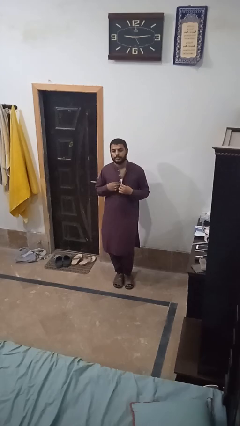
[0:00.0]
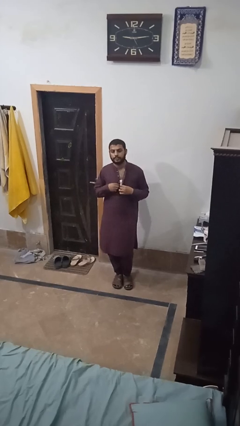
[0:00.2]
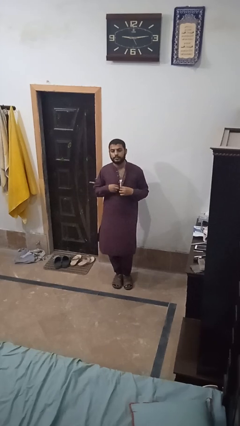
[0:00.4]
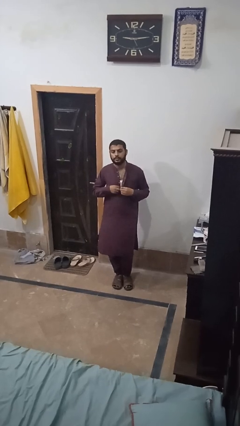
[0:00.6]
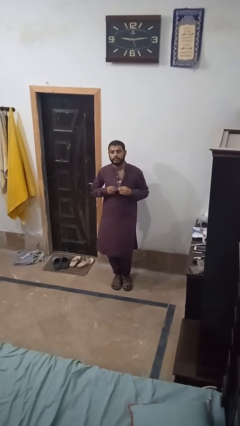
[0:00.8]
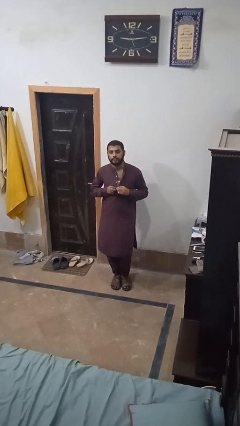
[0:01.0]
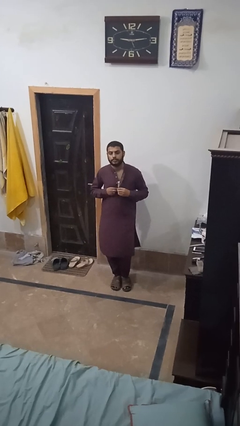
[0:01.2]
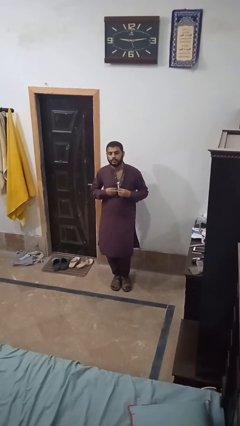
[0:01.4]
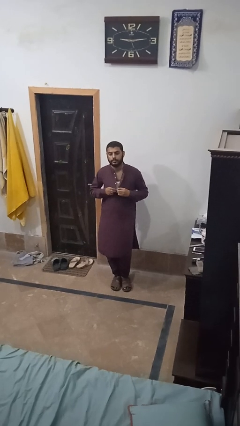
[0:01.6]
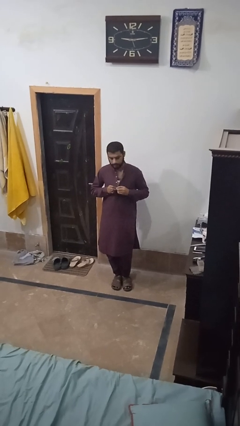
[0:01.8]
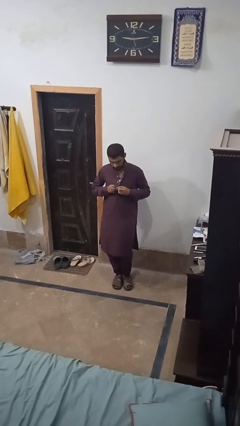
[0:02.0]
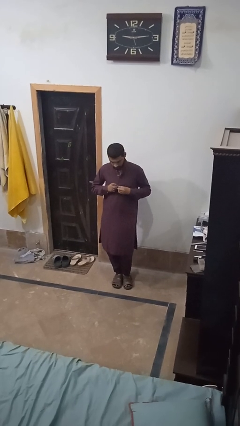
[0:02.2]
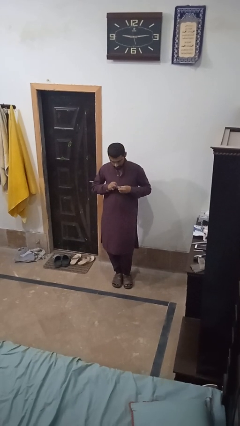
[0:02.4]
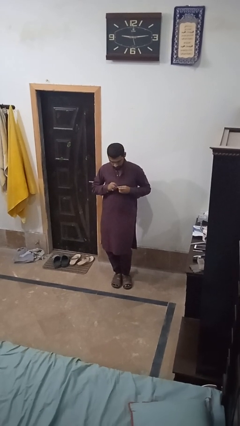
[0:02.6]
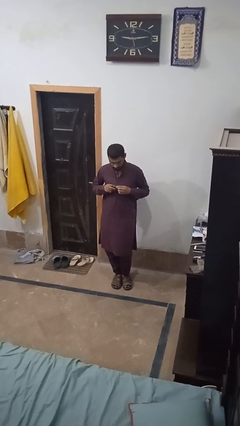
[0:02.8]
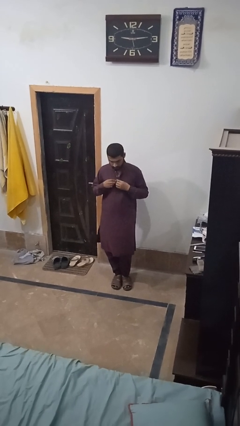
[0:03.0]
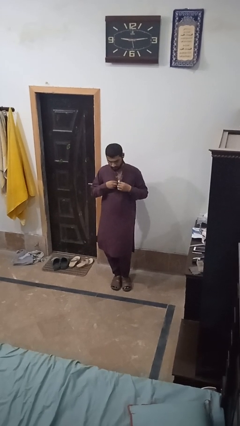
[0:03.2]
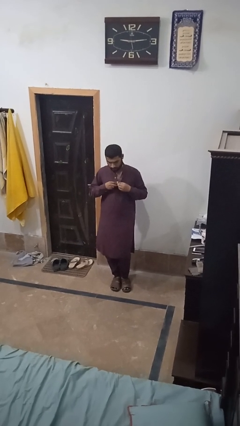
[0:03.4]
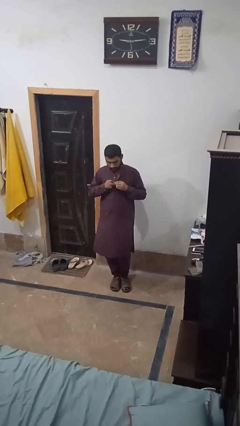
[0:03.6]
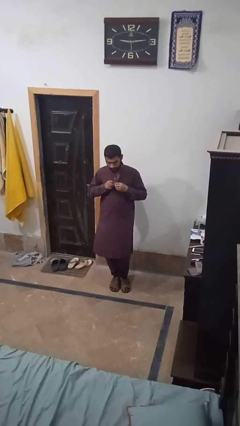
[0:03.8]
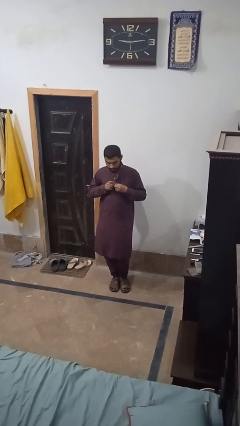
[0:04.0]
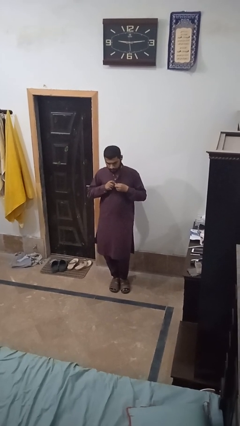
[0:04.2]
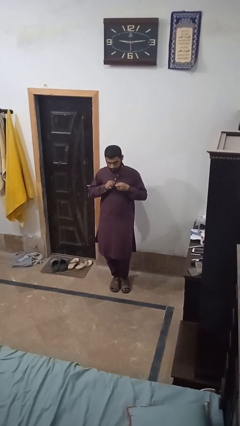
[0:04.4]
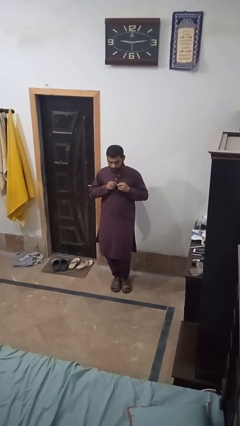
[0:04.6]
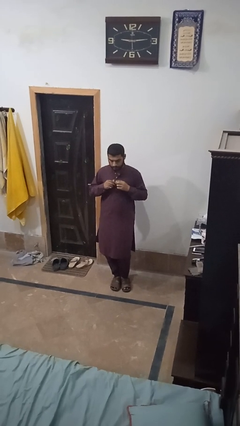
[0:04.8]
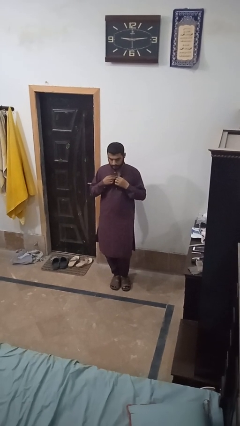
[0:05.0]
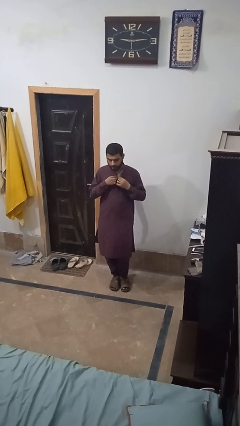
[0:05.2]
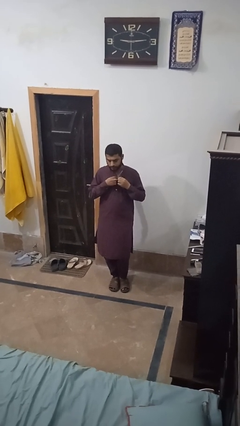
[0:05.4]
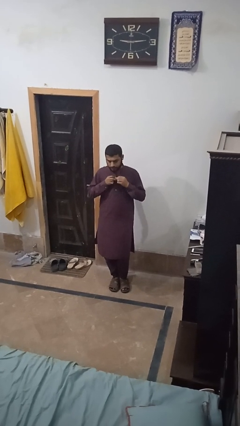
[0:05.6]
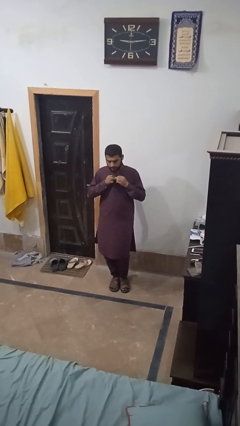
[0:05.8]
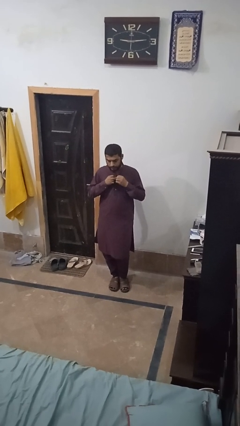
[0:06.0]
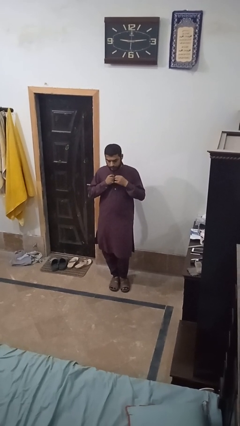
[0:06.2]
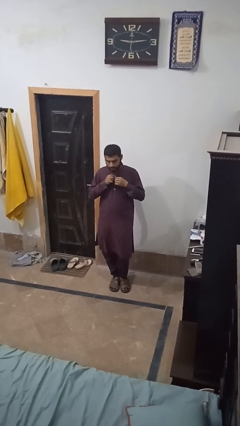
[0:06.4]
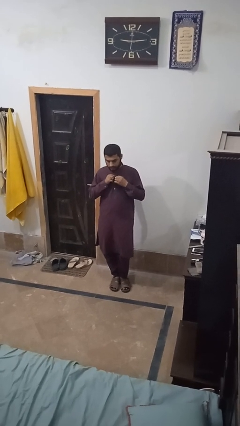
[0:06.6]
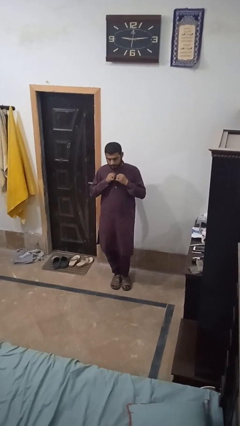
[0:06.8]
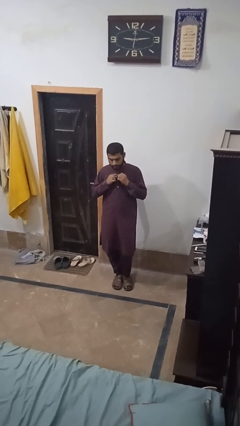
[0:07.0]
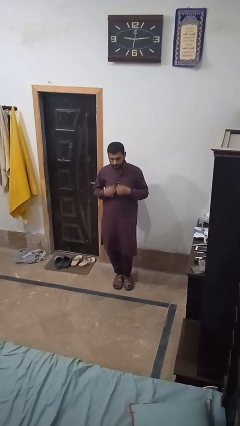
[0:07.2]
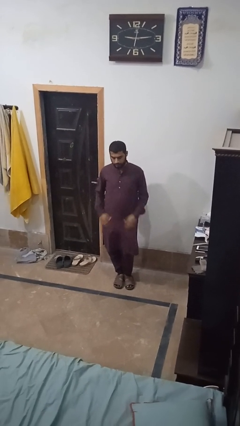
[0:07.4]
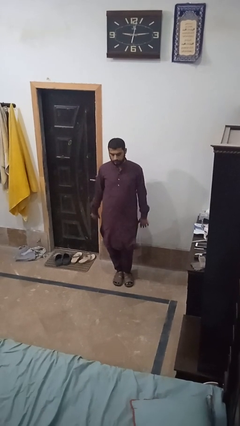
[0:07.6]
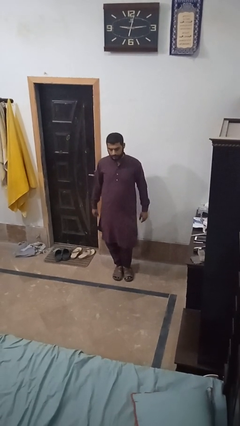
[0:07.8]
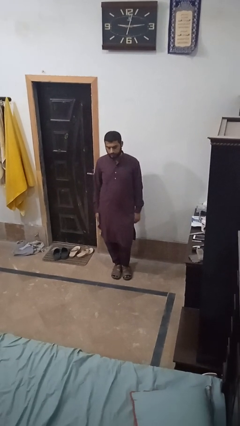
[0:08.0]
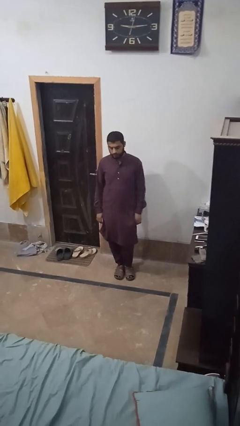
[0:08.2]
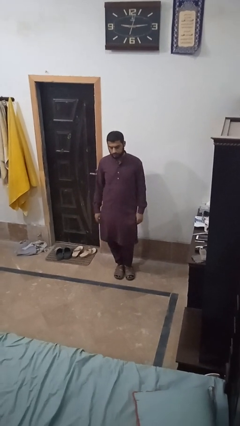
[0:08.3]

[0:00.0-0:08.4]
person buttons shirt

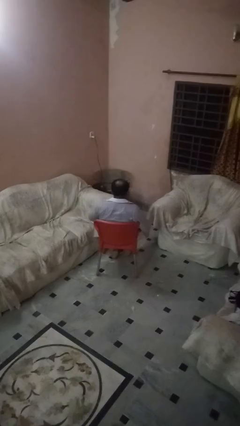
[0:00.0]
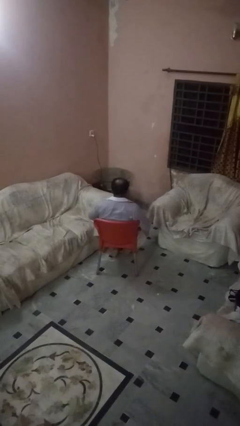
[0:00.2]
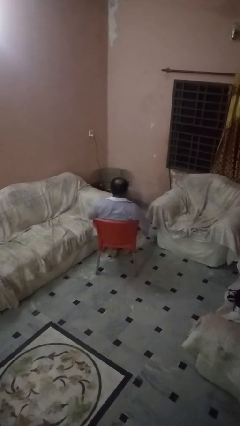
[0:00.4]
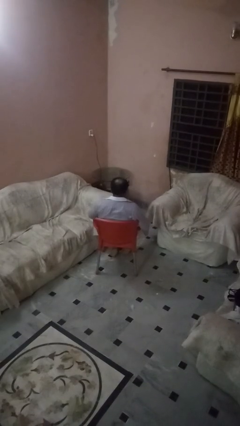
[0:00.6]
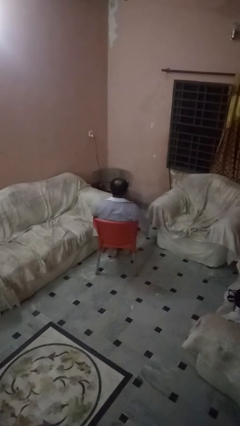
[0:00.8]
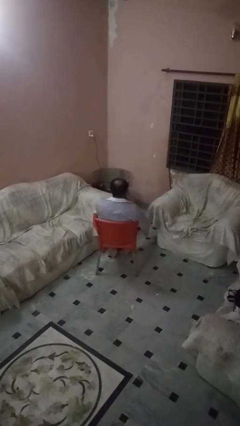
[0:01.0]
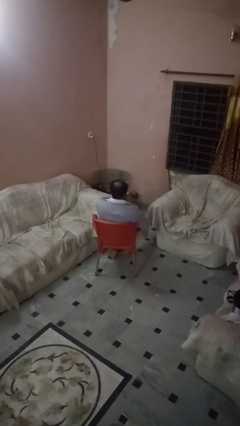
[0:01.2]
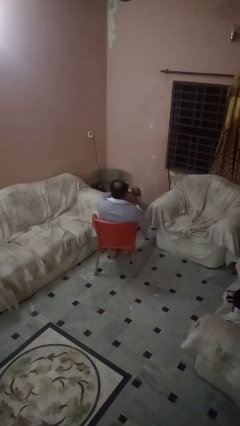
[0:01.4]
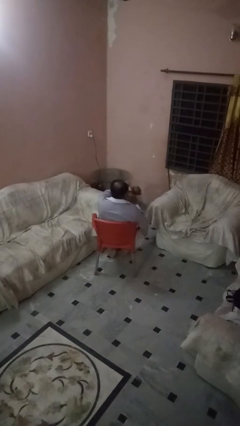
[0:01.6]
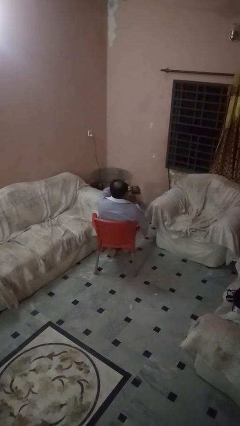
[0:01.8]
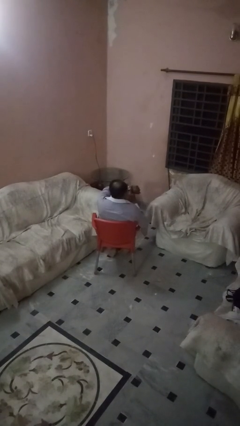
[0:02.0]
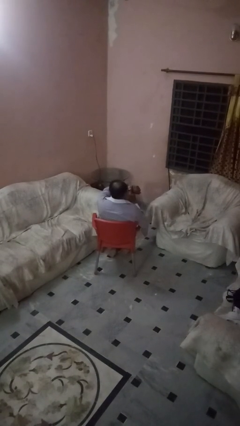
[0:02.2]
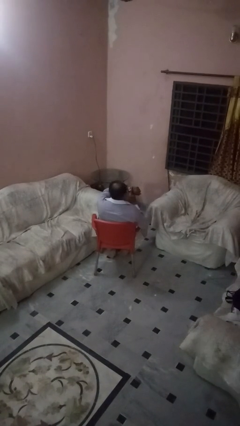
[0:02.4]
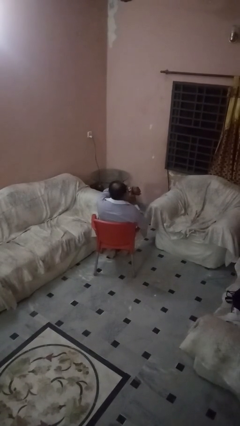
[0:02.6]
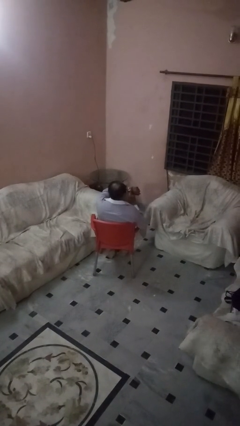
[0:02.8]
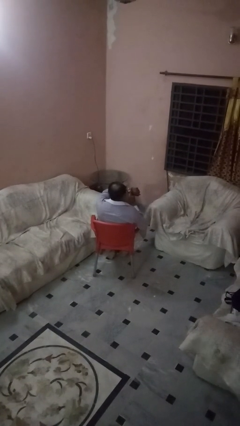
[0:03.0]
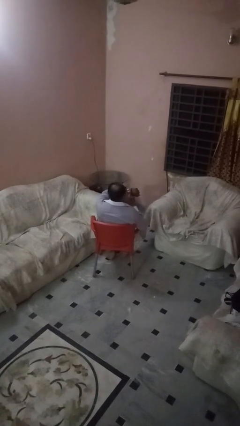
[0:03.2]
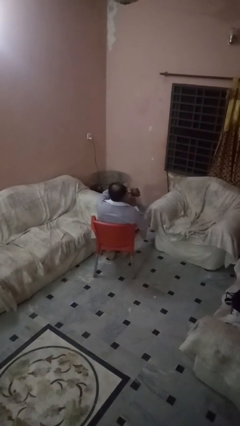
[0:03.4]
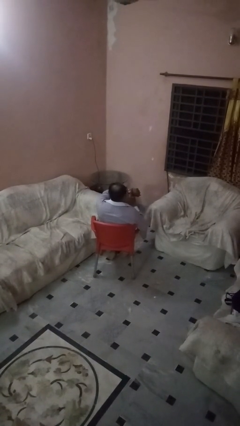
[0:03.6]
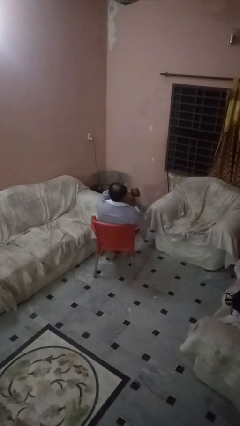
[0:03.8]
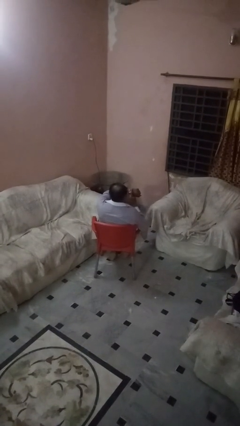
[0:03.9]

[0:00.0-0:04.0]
person gestures watch closely

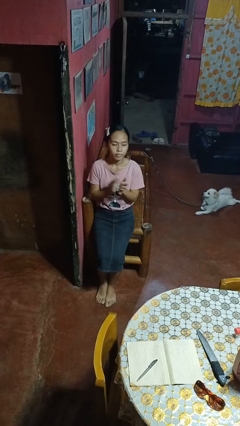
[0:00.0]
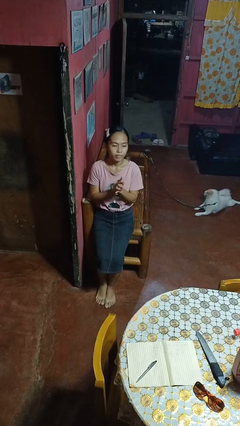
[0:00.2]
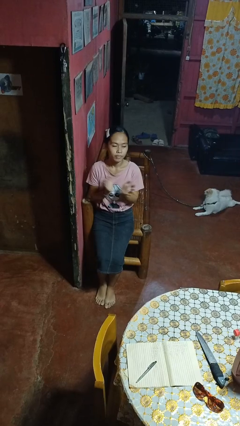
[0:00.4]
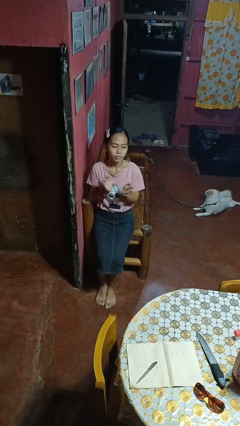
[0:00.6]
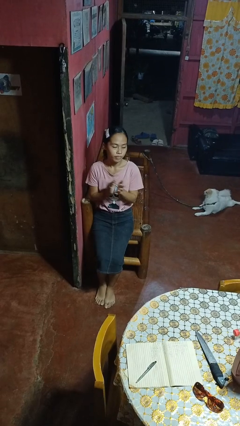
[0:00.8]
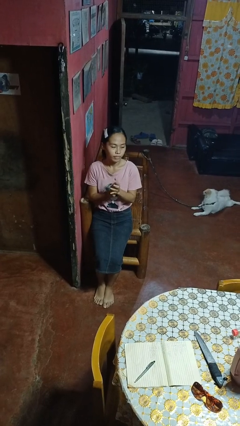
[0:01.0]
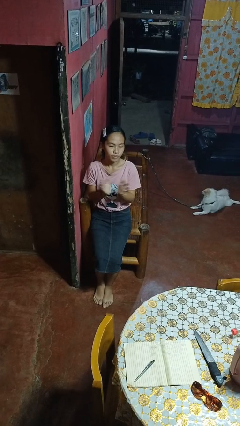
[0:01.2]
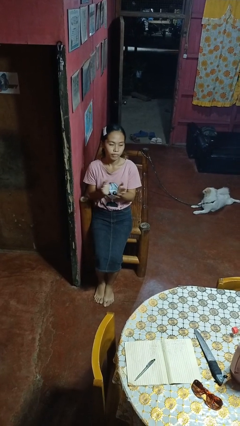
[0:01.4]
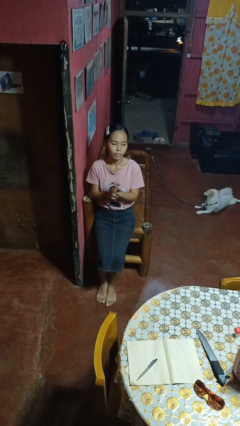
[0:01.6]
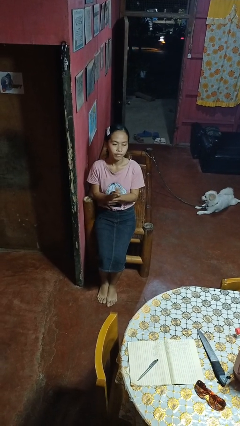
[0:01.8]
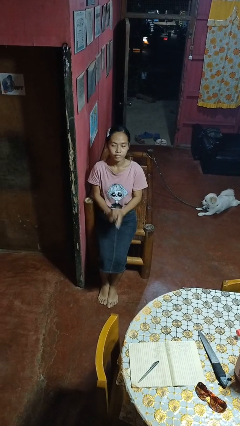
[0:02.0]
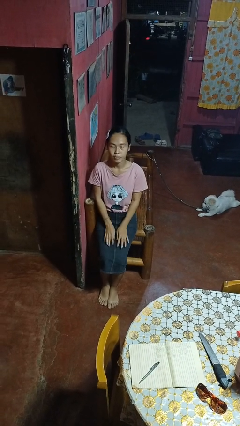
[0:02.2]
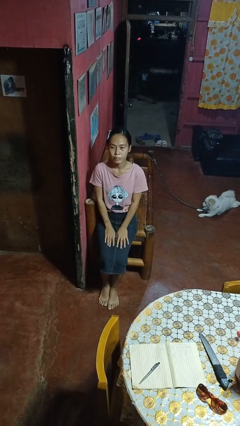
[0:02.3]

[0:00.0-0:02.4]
person claps hands

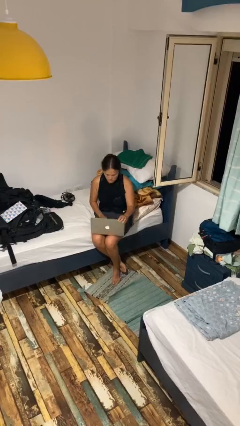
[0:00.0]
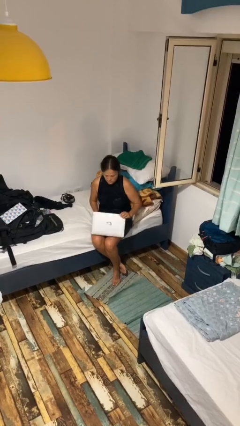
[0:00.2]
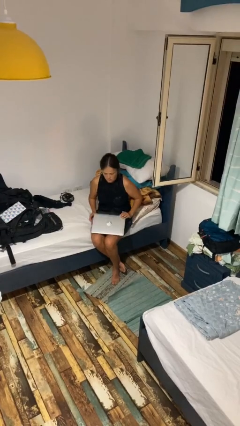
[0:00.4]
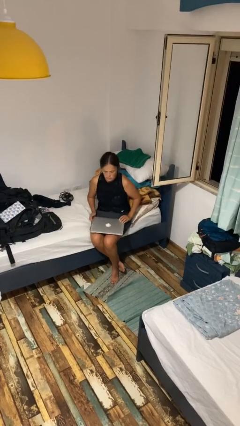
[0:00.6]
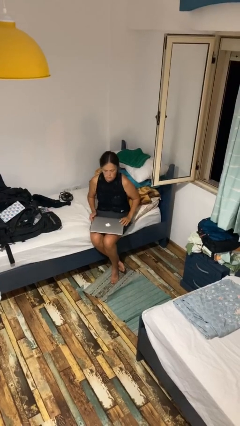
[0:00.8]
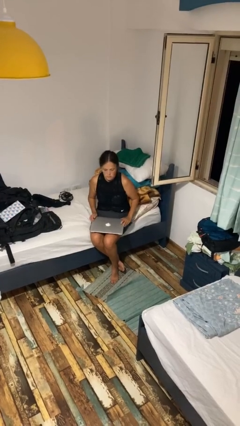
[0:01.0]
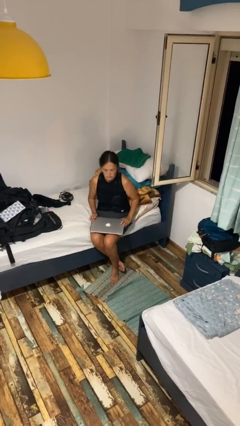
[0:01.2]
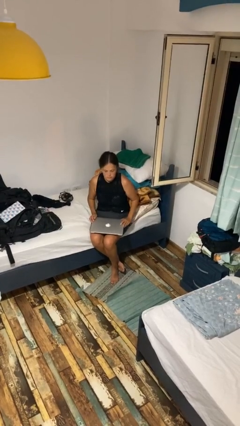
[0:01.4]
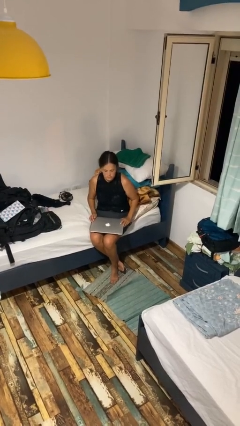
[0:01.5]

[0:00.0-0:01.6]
person closes laptop

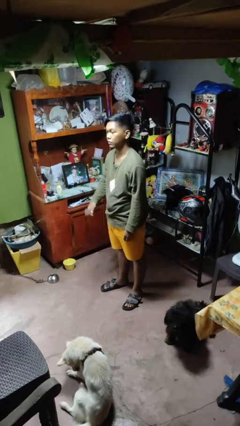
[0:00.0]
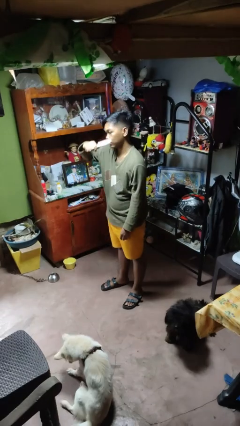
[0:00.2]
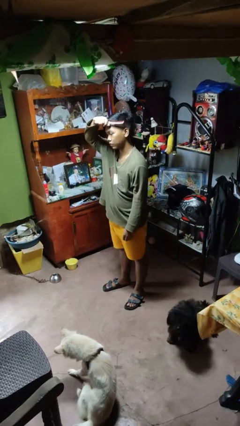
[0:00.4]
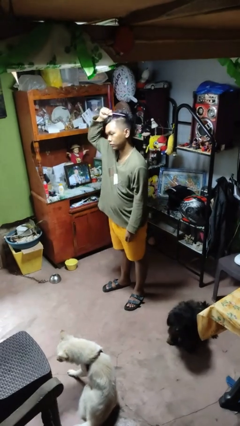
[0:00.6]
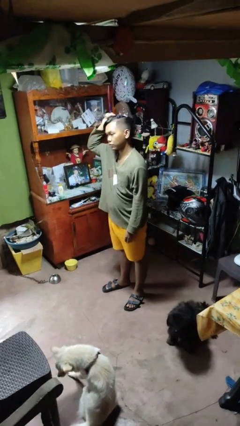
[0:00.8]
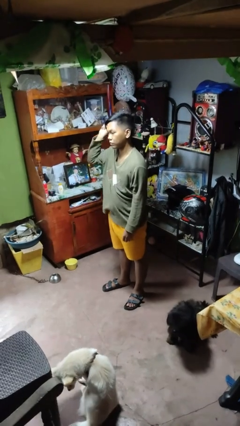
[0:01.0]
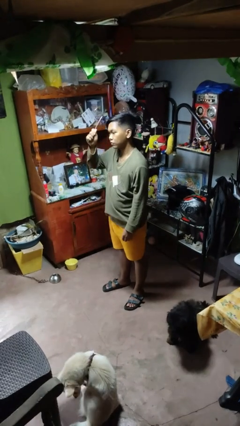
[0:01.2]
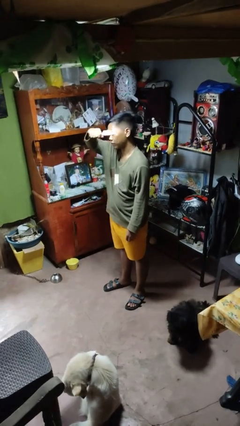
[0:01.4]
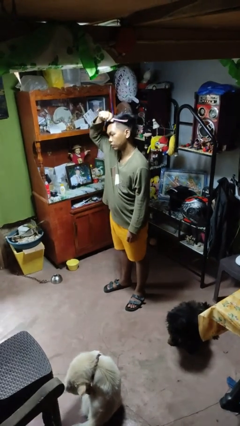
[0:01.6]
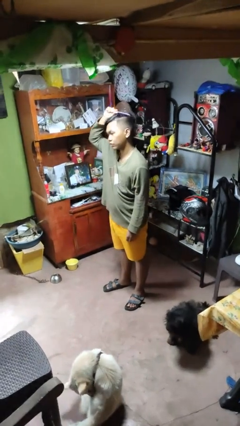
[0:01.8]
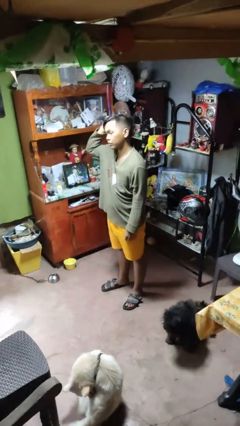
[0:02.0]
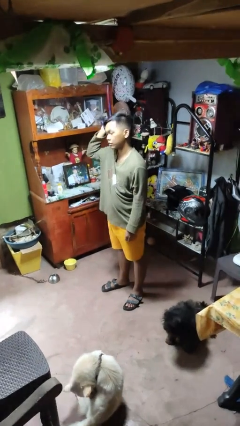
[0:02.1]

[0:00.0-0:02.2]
person brushes hair
